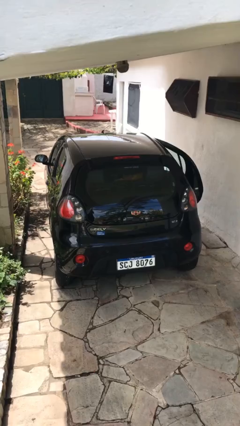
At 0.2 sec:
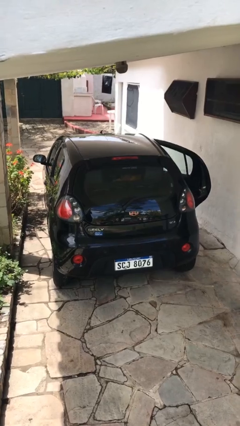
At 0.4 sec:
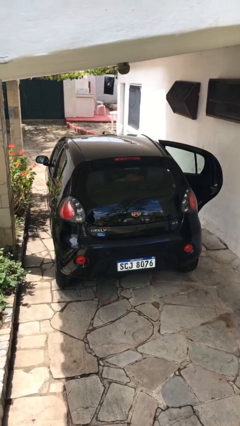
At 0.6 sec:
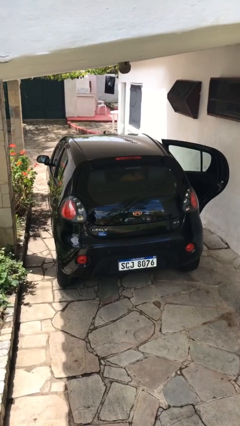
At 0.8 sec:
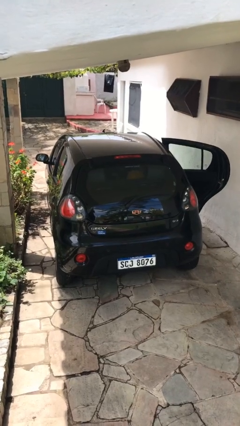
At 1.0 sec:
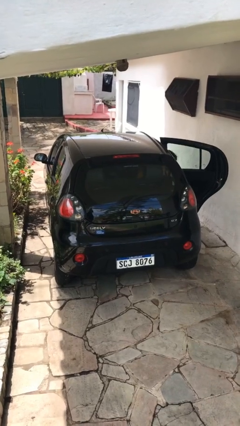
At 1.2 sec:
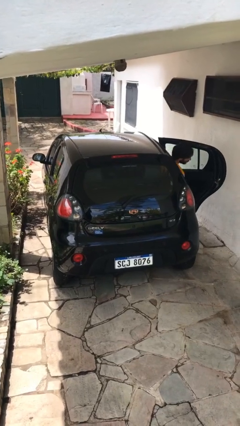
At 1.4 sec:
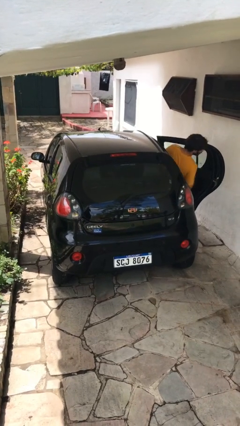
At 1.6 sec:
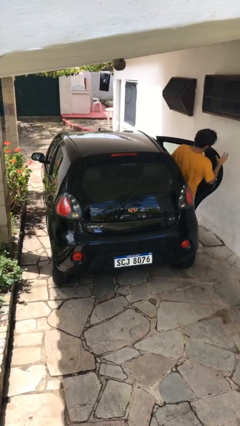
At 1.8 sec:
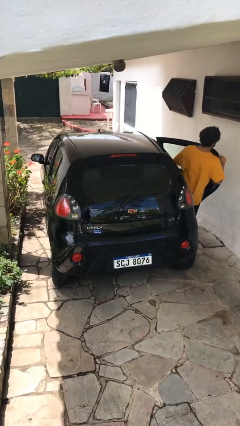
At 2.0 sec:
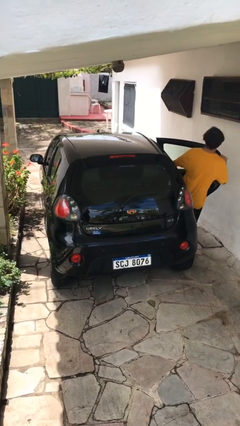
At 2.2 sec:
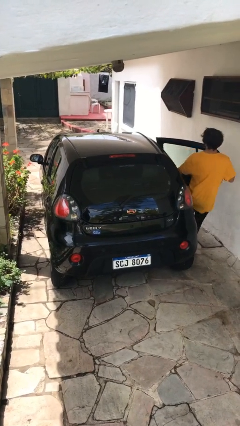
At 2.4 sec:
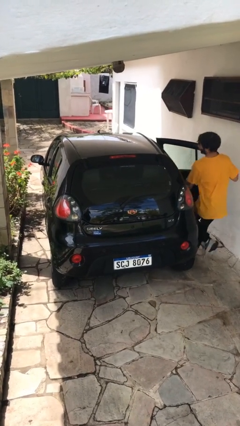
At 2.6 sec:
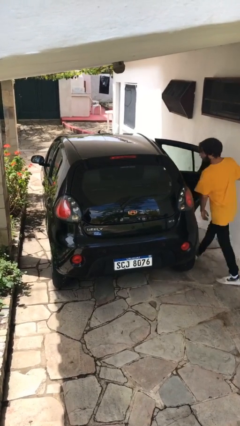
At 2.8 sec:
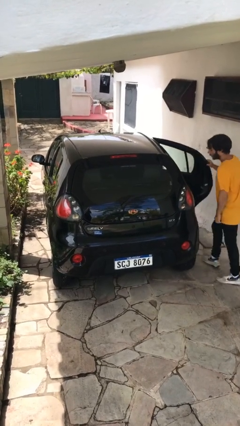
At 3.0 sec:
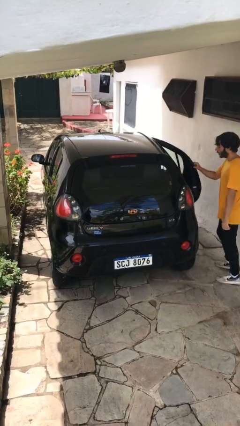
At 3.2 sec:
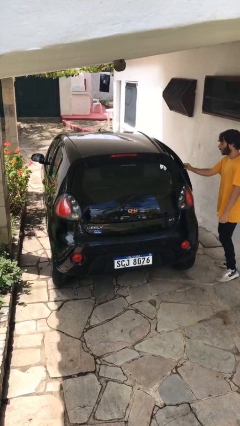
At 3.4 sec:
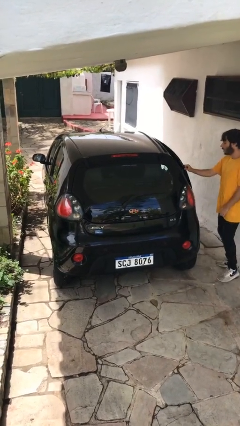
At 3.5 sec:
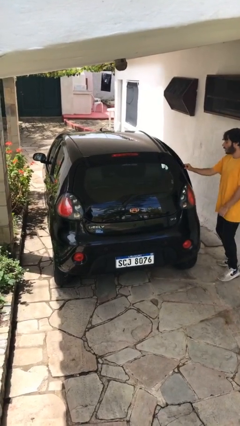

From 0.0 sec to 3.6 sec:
car drops off person

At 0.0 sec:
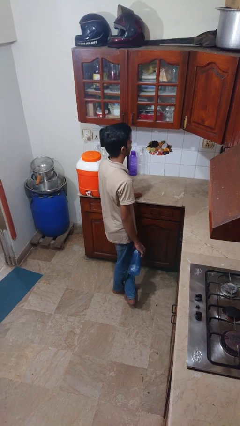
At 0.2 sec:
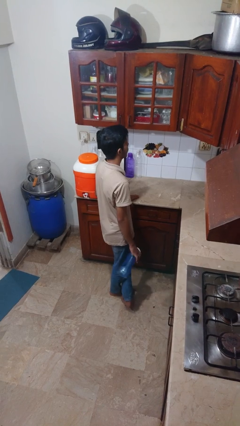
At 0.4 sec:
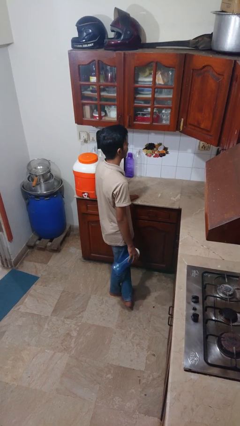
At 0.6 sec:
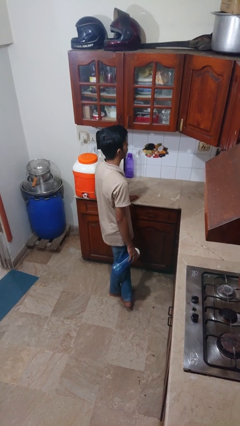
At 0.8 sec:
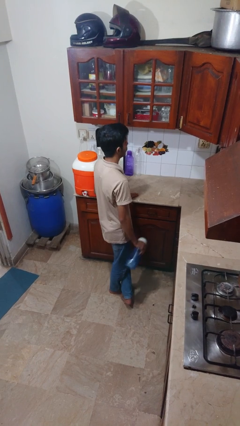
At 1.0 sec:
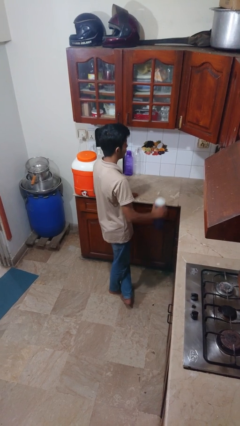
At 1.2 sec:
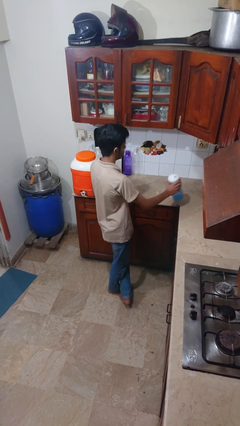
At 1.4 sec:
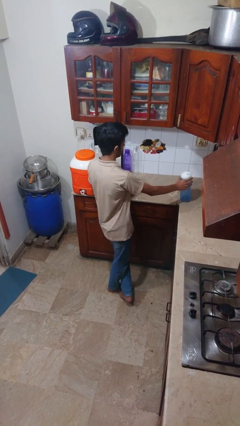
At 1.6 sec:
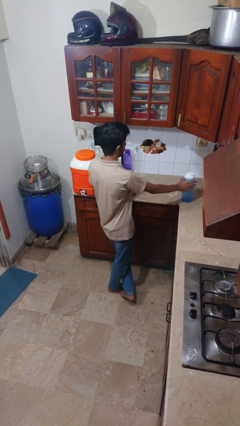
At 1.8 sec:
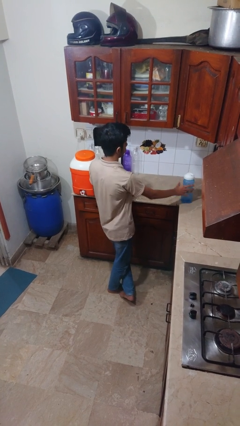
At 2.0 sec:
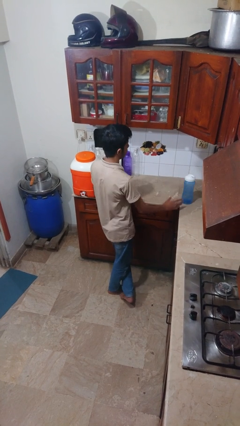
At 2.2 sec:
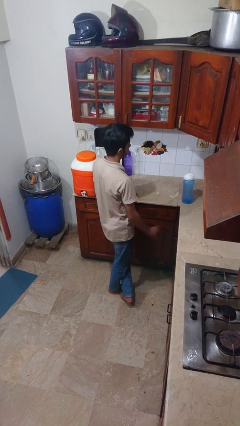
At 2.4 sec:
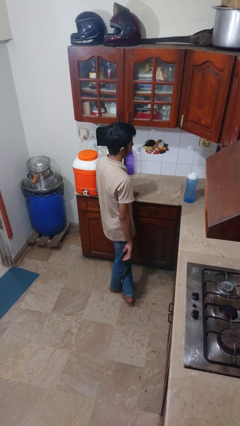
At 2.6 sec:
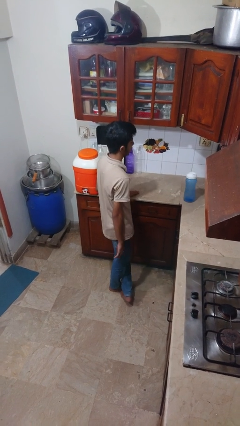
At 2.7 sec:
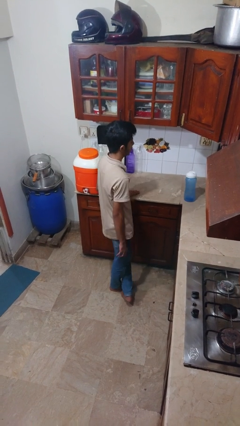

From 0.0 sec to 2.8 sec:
person puts down object on countertop

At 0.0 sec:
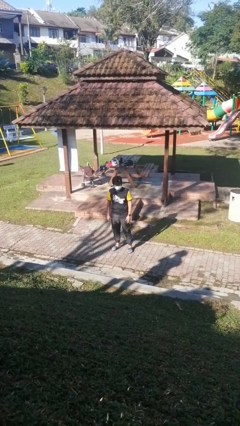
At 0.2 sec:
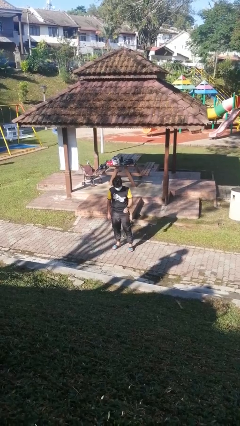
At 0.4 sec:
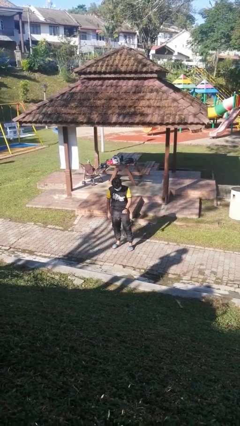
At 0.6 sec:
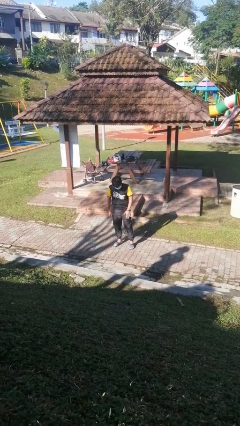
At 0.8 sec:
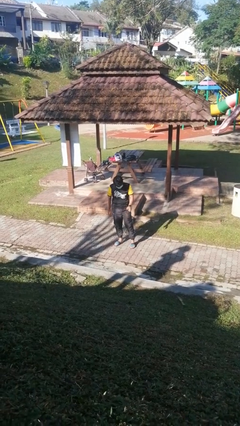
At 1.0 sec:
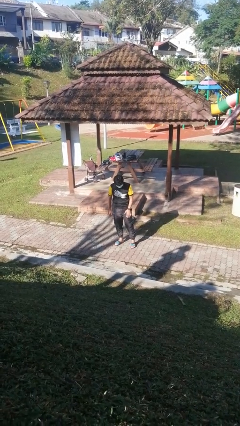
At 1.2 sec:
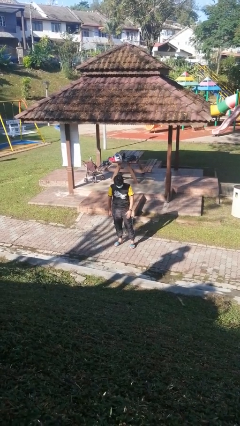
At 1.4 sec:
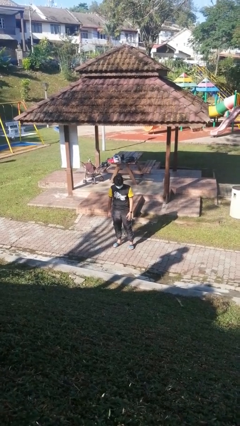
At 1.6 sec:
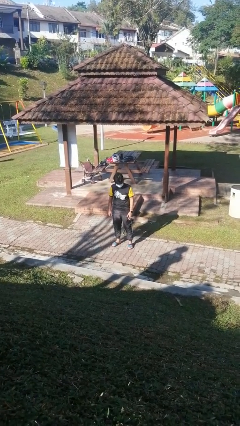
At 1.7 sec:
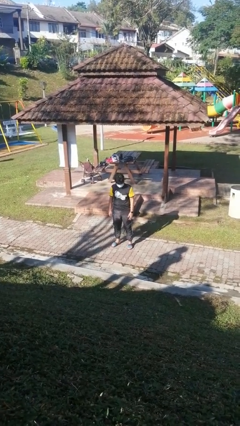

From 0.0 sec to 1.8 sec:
person slaps hands on thighs

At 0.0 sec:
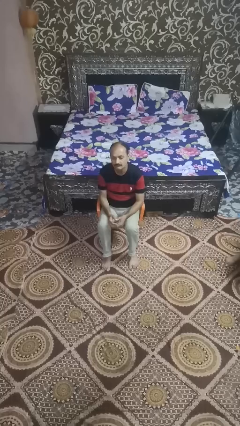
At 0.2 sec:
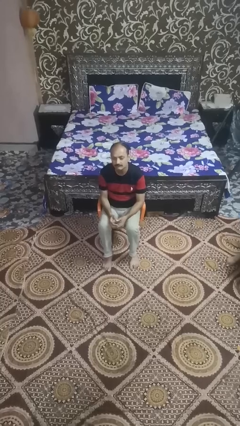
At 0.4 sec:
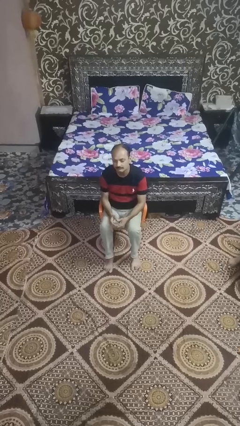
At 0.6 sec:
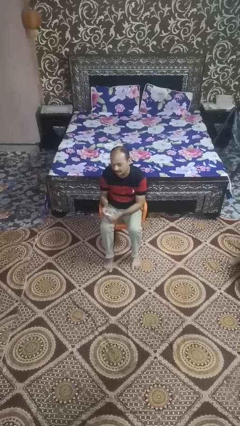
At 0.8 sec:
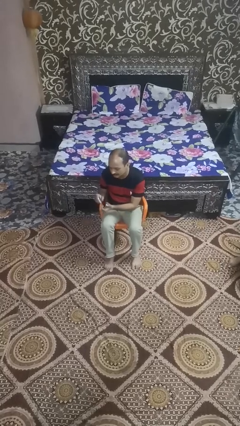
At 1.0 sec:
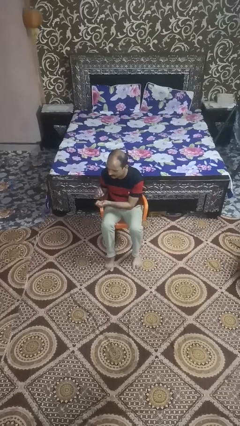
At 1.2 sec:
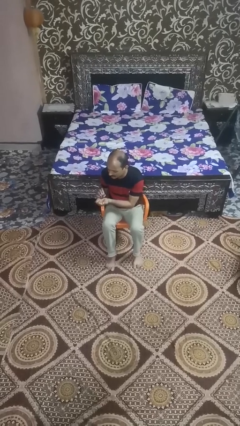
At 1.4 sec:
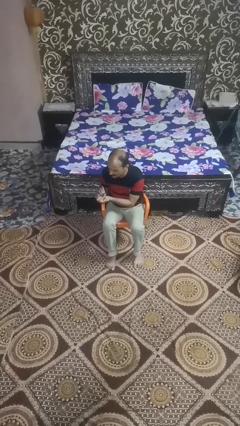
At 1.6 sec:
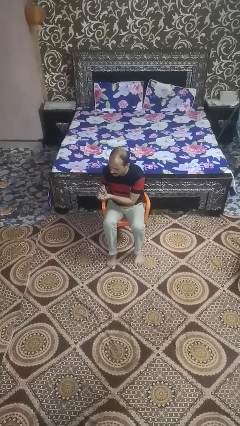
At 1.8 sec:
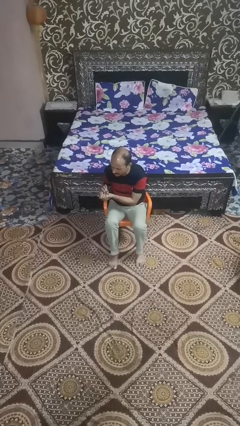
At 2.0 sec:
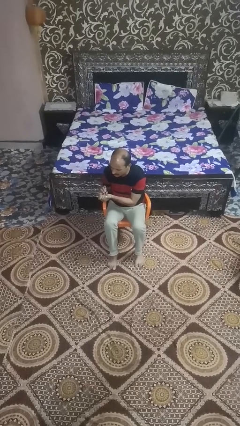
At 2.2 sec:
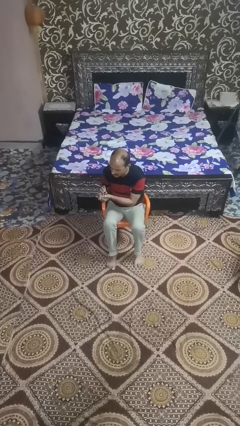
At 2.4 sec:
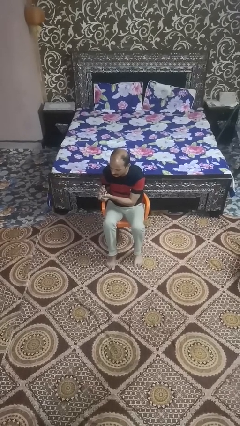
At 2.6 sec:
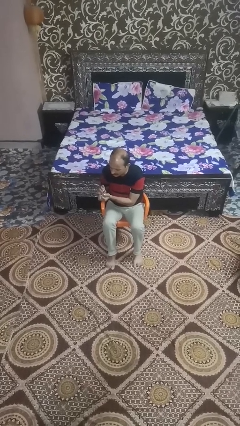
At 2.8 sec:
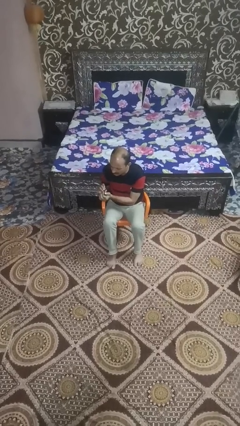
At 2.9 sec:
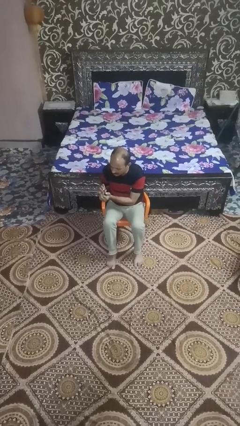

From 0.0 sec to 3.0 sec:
person clips fingernails

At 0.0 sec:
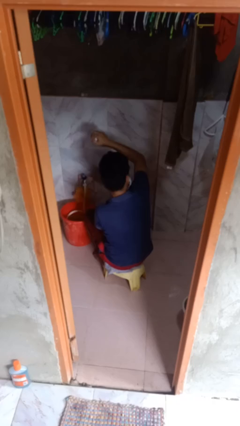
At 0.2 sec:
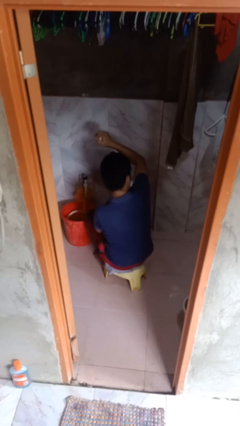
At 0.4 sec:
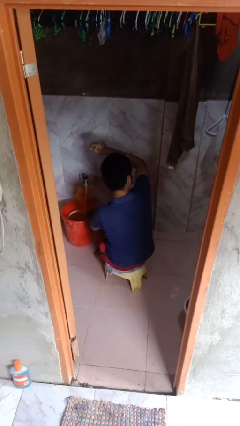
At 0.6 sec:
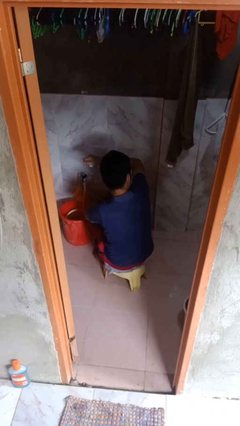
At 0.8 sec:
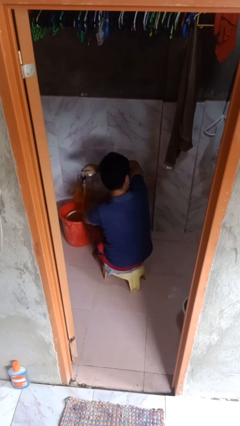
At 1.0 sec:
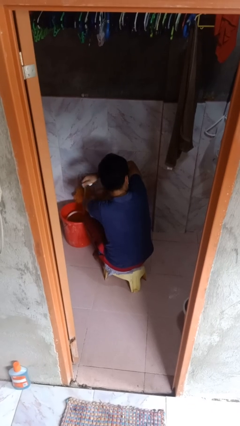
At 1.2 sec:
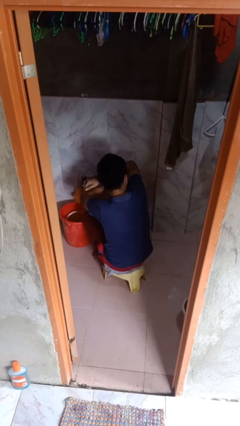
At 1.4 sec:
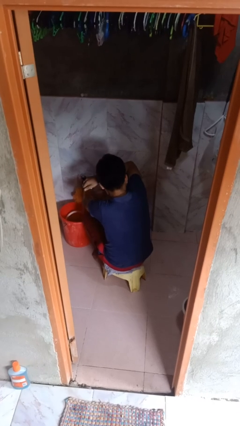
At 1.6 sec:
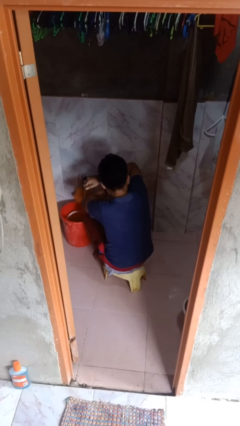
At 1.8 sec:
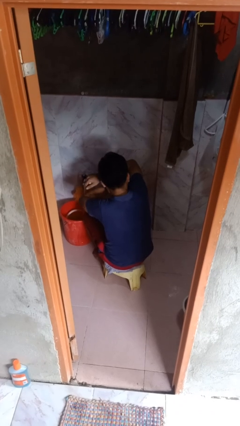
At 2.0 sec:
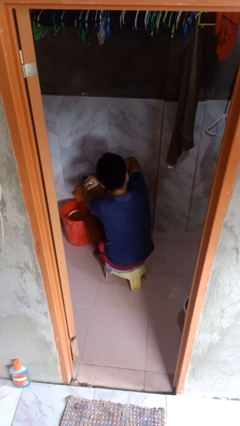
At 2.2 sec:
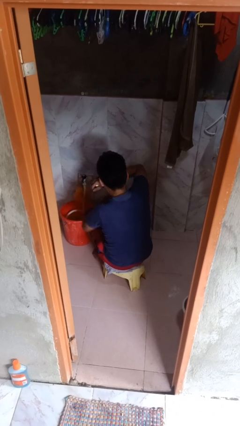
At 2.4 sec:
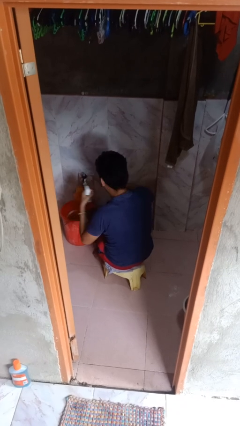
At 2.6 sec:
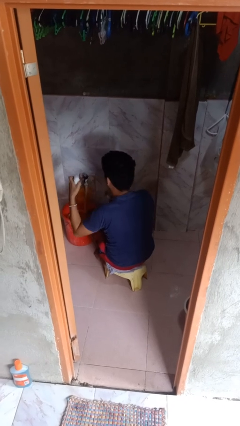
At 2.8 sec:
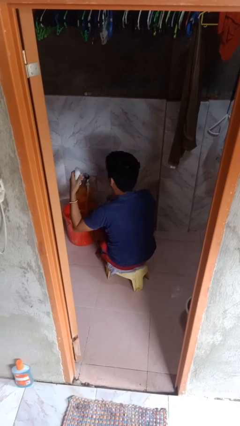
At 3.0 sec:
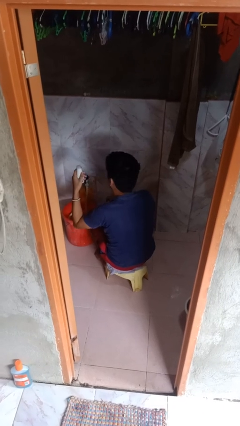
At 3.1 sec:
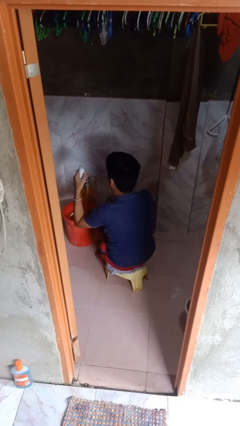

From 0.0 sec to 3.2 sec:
person applies deodorant

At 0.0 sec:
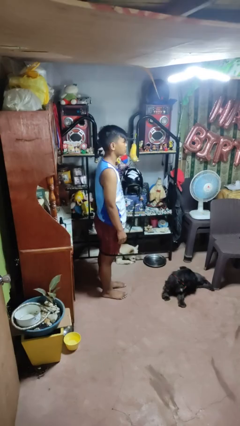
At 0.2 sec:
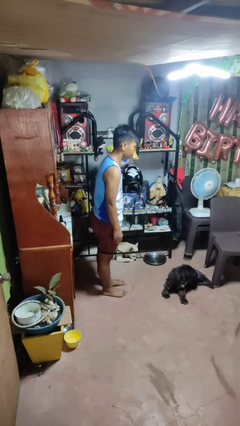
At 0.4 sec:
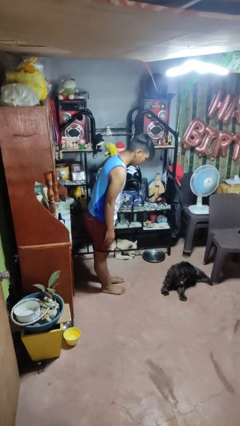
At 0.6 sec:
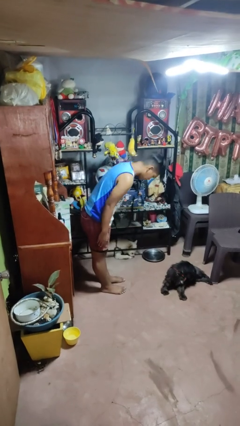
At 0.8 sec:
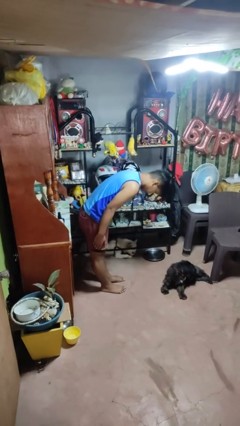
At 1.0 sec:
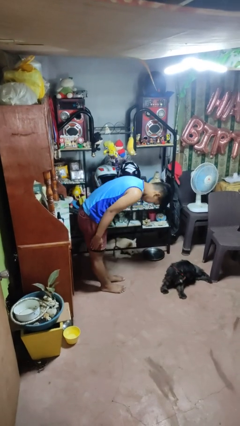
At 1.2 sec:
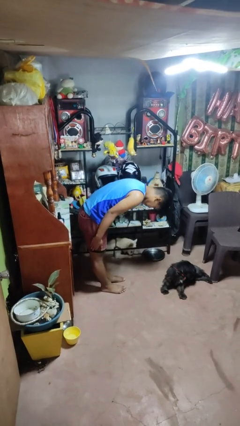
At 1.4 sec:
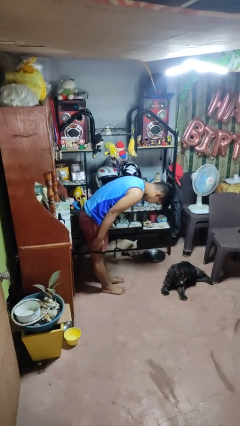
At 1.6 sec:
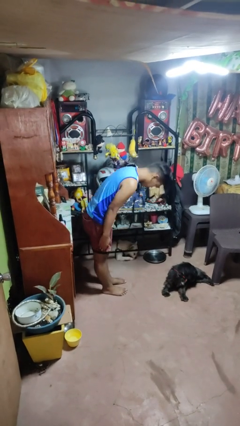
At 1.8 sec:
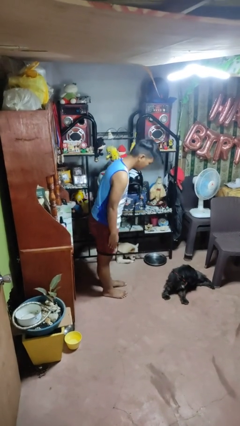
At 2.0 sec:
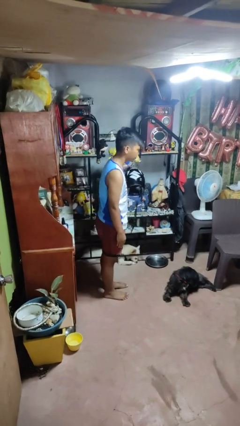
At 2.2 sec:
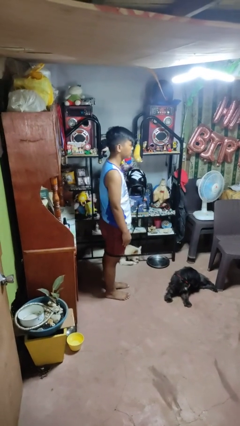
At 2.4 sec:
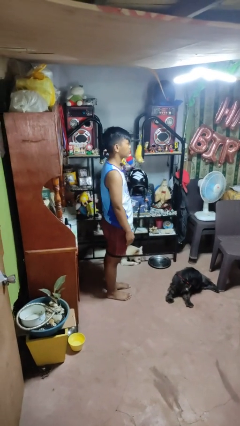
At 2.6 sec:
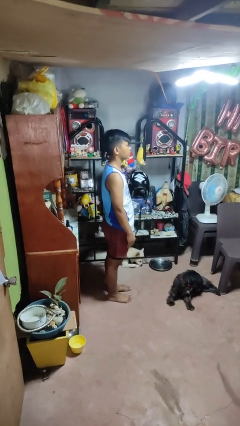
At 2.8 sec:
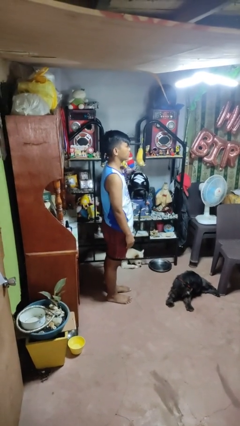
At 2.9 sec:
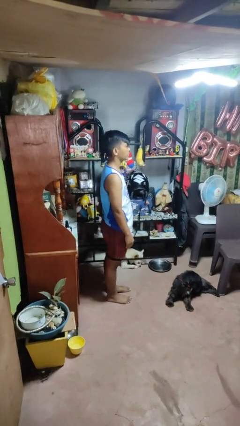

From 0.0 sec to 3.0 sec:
person bows
